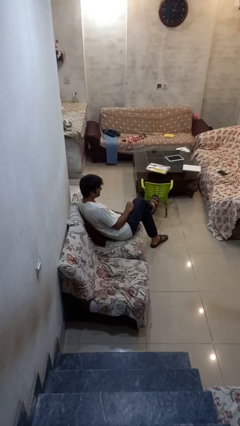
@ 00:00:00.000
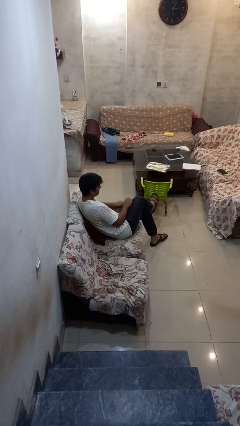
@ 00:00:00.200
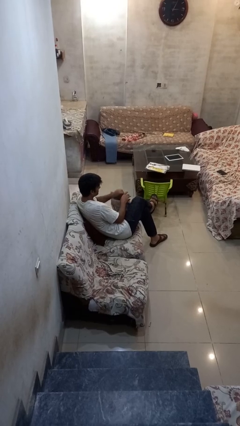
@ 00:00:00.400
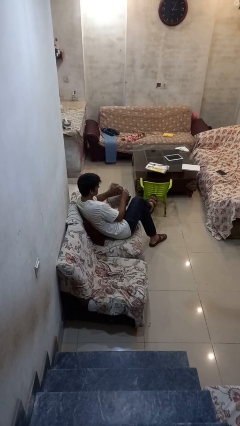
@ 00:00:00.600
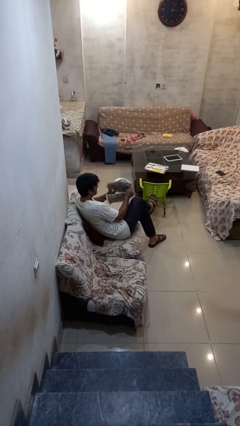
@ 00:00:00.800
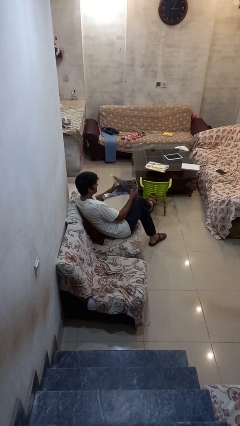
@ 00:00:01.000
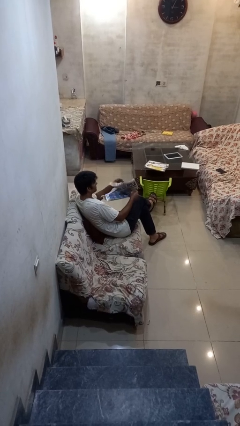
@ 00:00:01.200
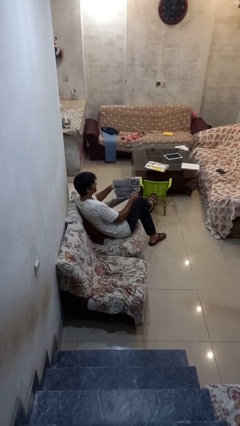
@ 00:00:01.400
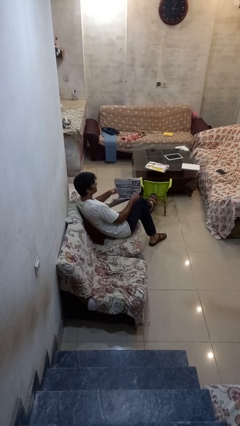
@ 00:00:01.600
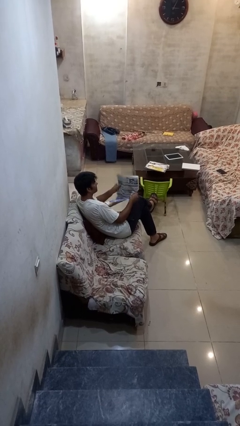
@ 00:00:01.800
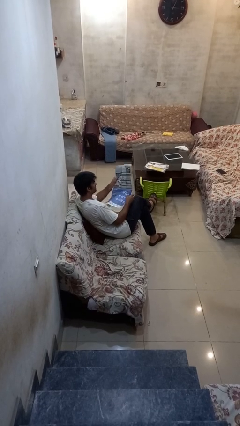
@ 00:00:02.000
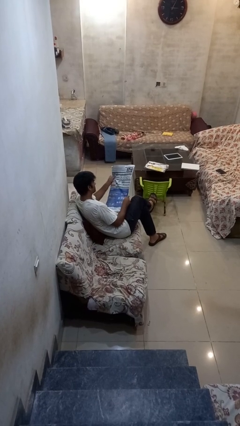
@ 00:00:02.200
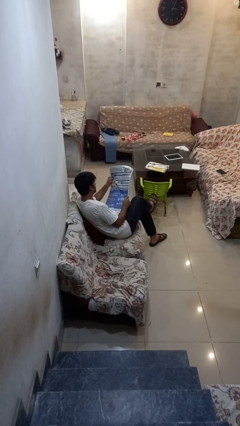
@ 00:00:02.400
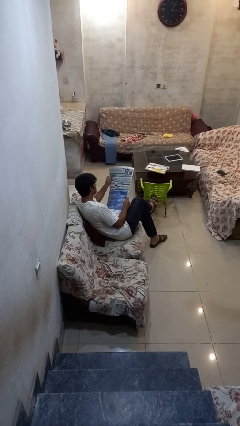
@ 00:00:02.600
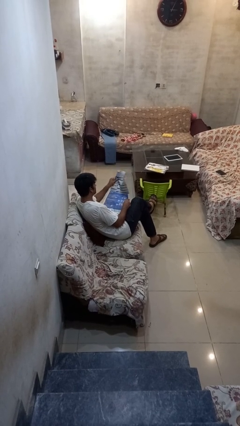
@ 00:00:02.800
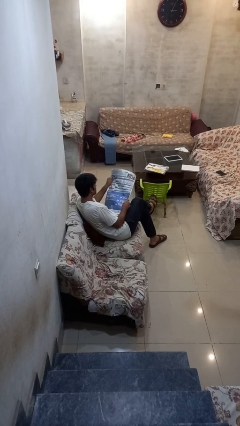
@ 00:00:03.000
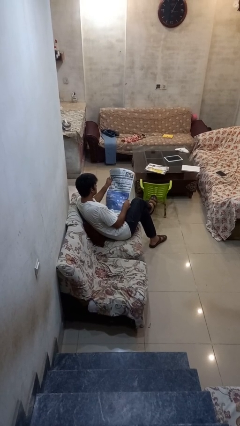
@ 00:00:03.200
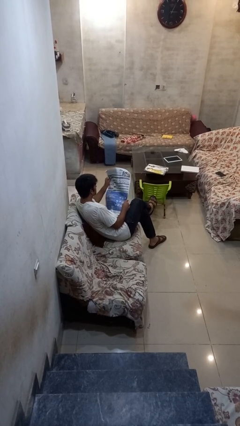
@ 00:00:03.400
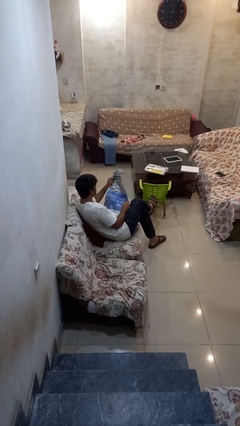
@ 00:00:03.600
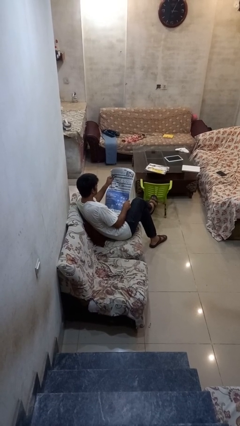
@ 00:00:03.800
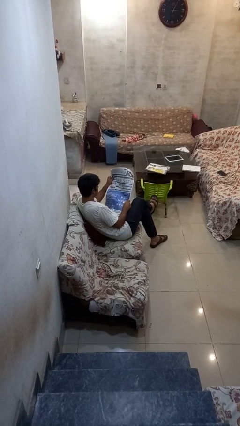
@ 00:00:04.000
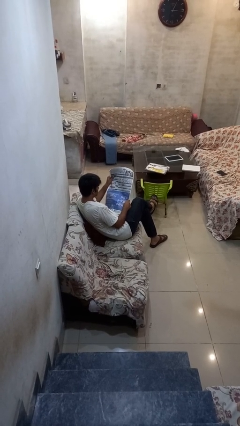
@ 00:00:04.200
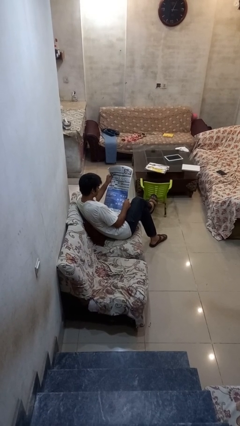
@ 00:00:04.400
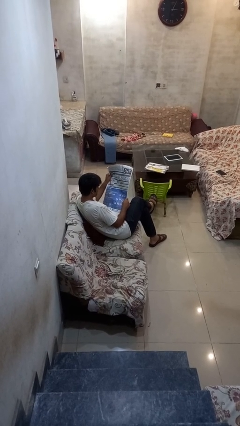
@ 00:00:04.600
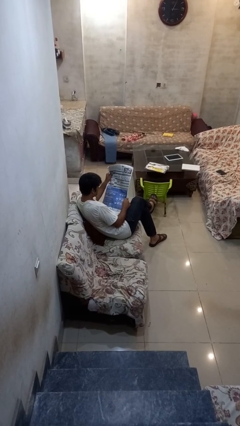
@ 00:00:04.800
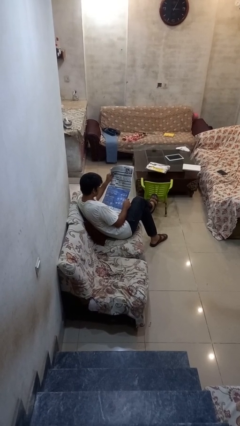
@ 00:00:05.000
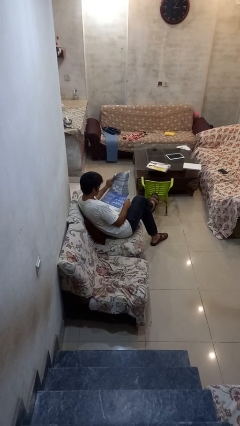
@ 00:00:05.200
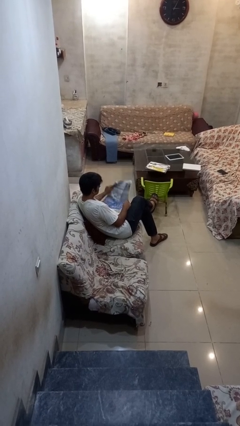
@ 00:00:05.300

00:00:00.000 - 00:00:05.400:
person reads newspaper

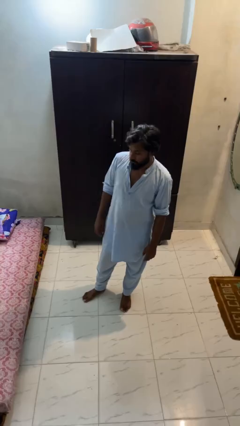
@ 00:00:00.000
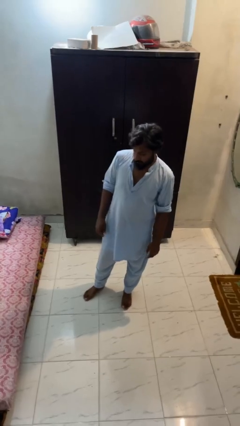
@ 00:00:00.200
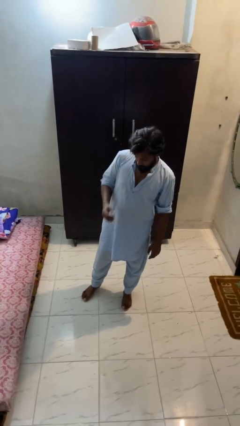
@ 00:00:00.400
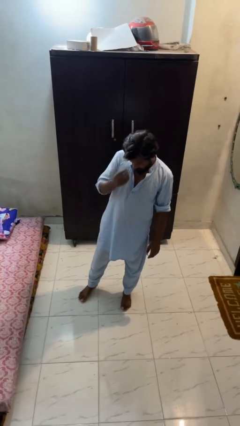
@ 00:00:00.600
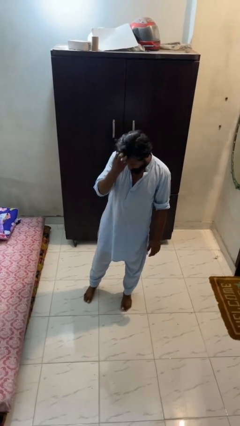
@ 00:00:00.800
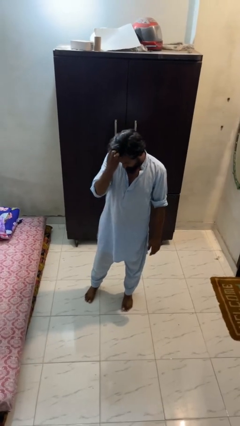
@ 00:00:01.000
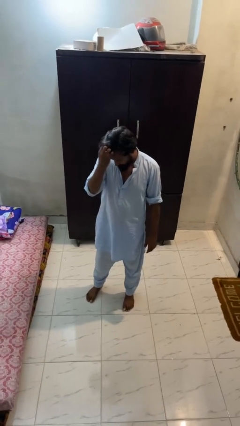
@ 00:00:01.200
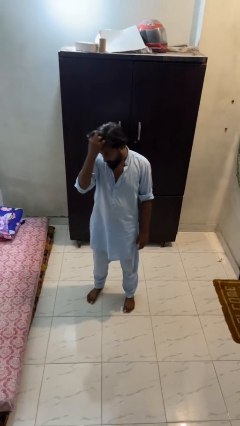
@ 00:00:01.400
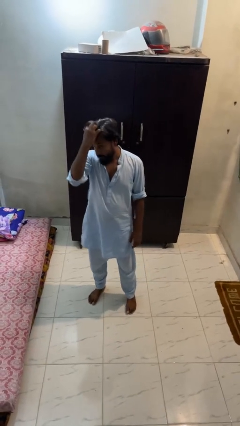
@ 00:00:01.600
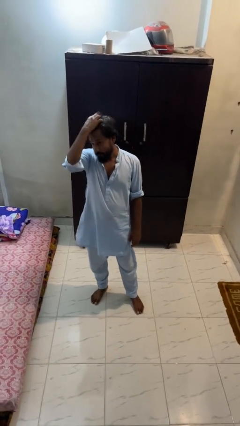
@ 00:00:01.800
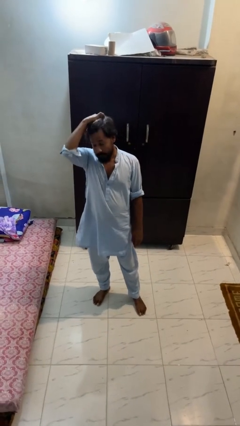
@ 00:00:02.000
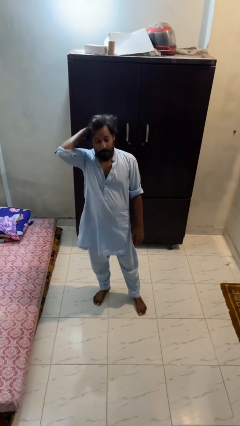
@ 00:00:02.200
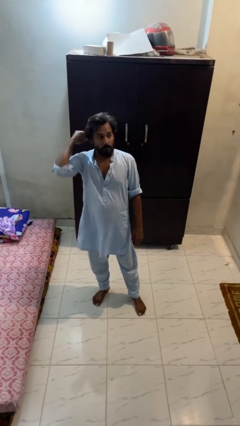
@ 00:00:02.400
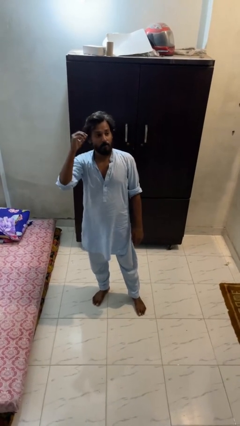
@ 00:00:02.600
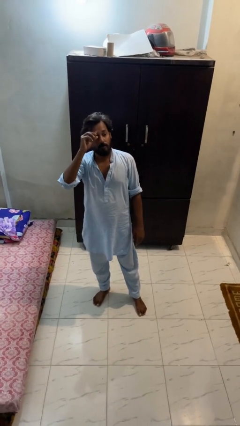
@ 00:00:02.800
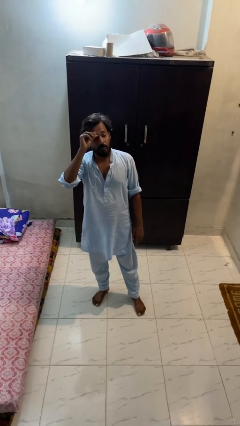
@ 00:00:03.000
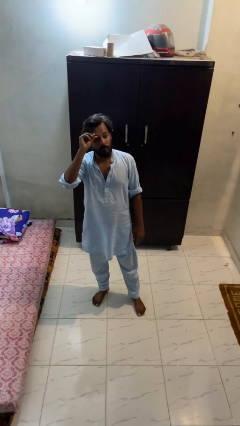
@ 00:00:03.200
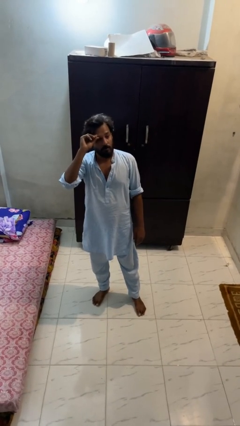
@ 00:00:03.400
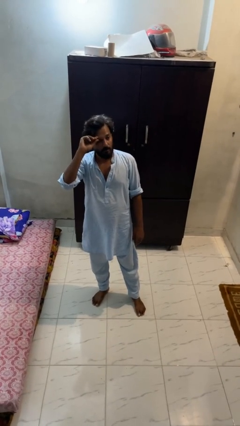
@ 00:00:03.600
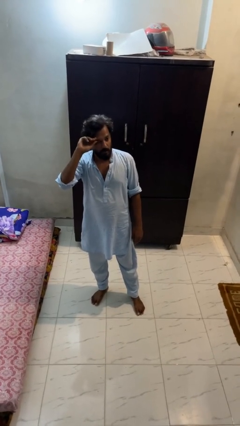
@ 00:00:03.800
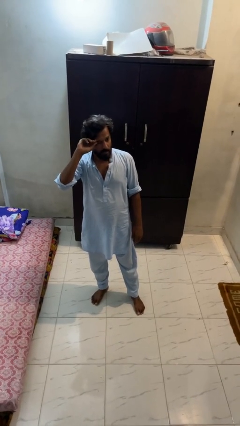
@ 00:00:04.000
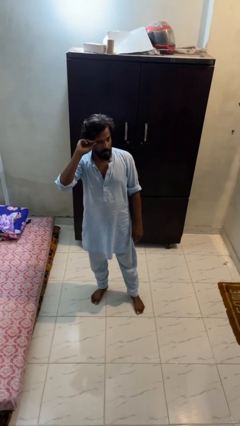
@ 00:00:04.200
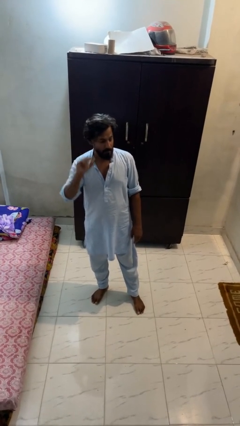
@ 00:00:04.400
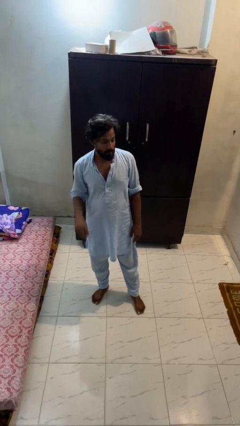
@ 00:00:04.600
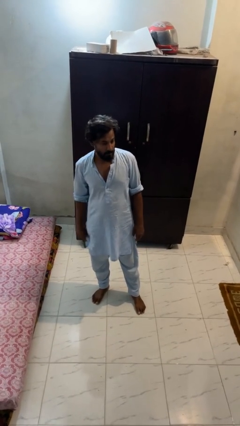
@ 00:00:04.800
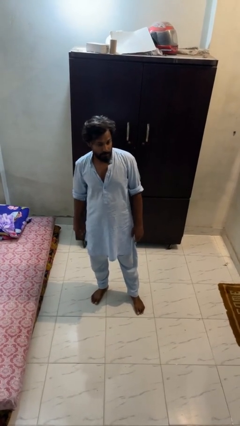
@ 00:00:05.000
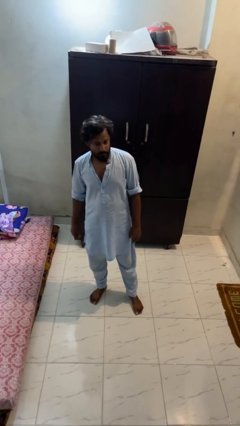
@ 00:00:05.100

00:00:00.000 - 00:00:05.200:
person scratches face

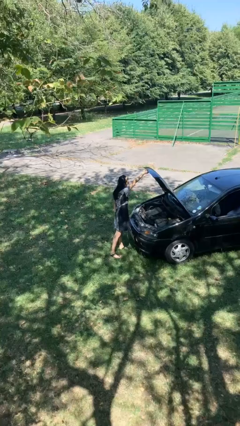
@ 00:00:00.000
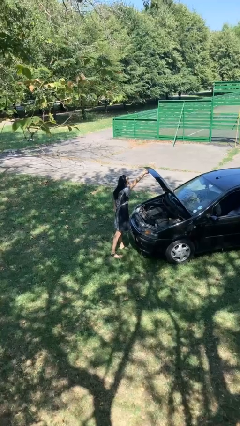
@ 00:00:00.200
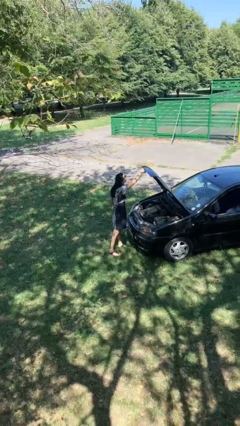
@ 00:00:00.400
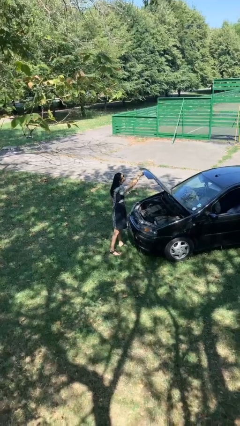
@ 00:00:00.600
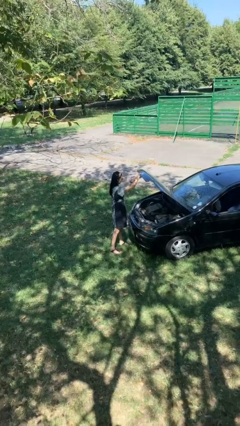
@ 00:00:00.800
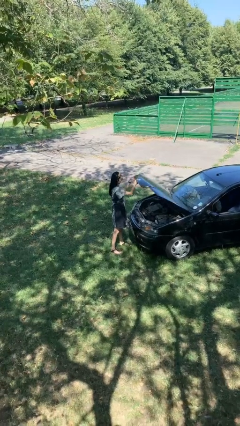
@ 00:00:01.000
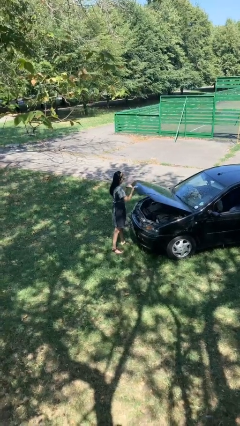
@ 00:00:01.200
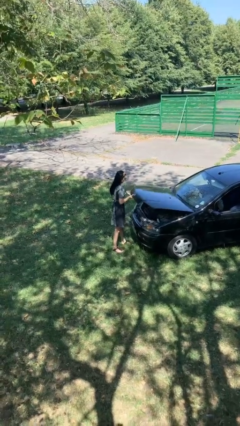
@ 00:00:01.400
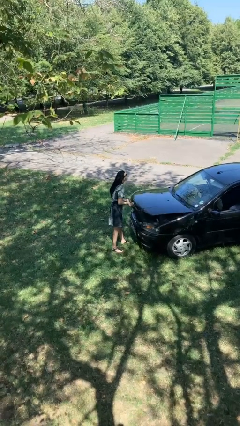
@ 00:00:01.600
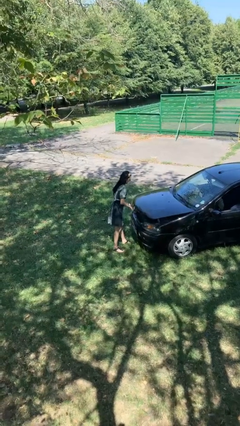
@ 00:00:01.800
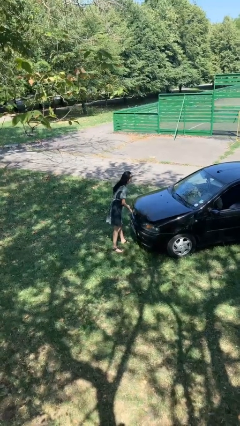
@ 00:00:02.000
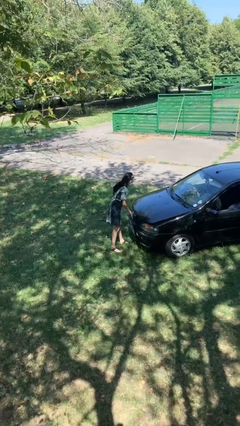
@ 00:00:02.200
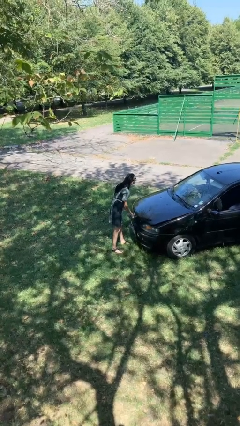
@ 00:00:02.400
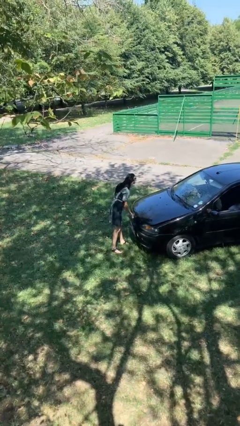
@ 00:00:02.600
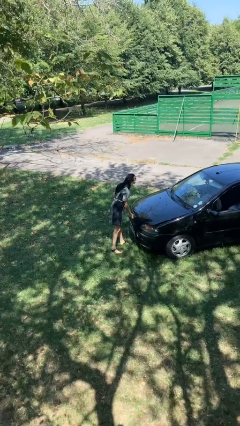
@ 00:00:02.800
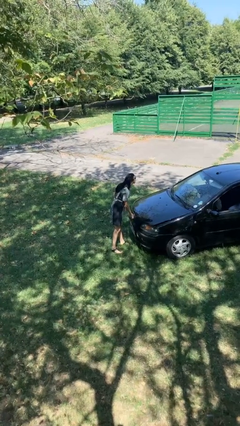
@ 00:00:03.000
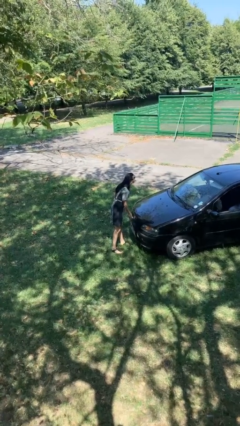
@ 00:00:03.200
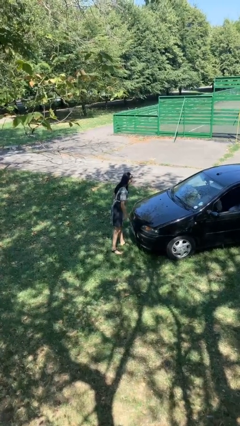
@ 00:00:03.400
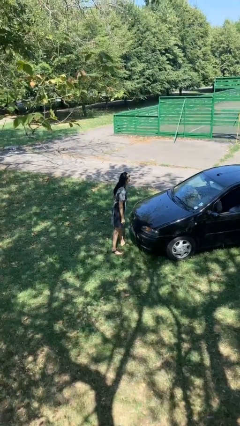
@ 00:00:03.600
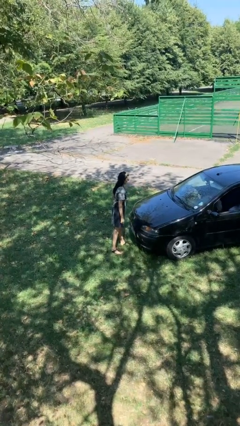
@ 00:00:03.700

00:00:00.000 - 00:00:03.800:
person closes car hood

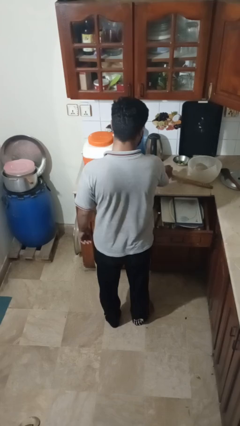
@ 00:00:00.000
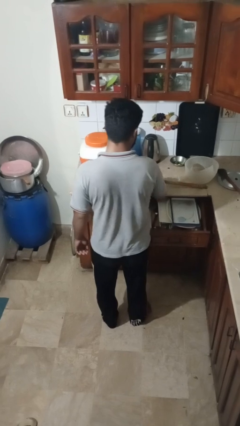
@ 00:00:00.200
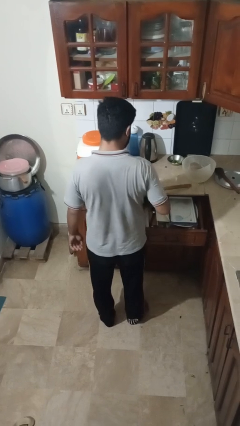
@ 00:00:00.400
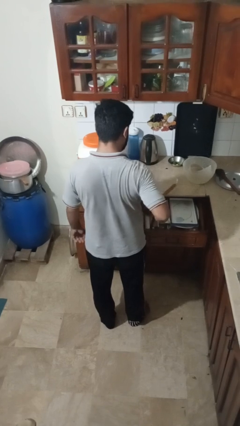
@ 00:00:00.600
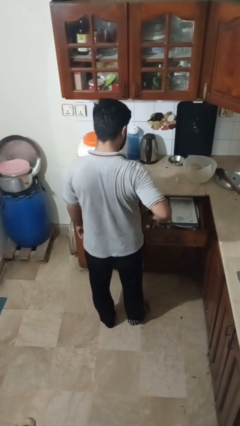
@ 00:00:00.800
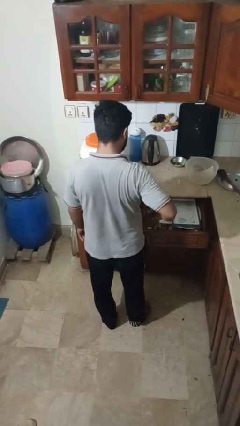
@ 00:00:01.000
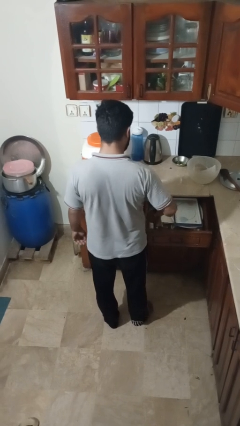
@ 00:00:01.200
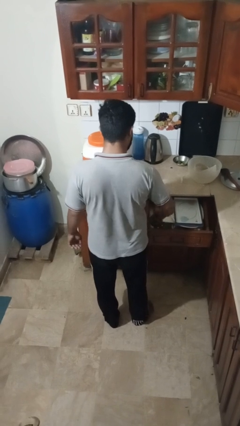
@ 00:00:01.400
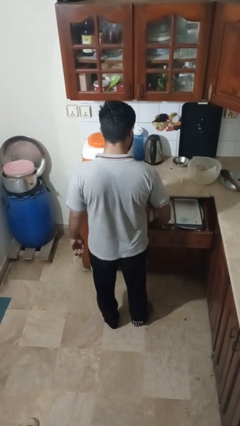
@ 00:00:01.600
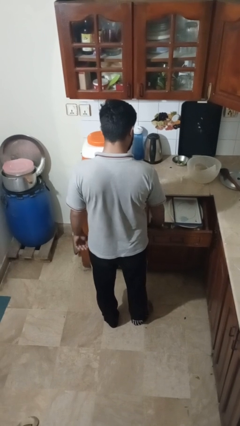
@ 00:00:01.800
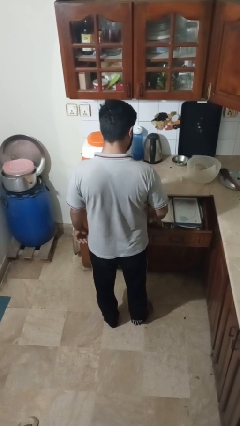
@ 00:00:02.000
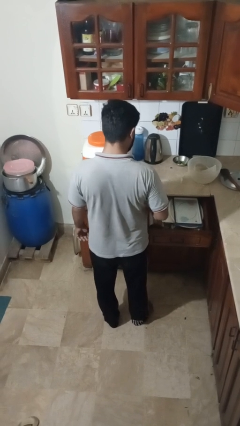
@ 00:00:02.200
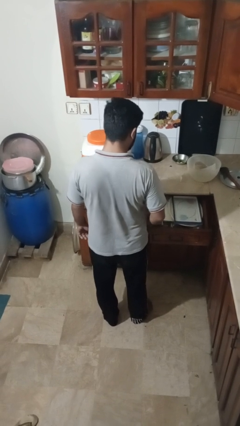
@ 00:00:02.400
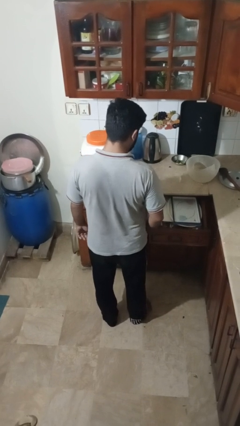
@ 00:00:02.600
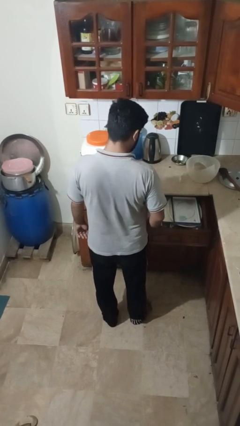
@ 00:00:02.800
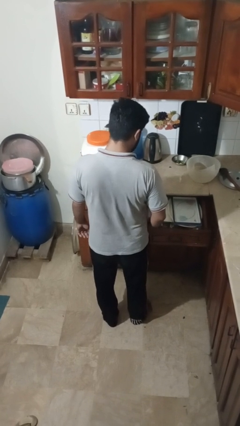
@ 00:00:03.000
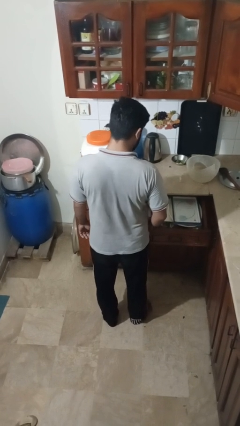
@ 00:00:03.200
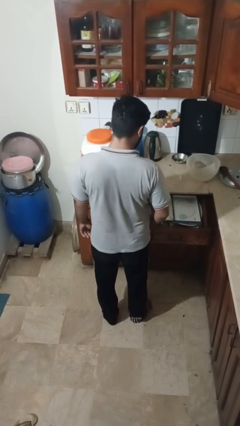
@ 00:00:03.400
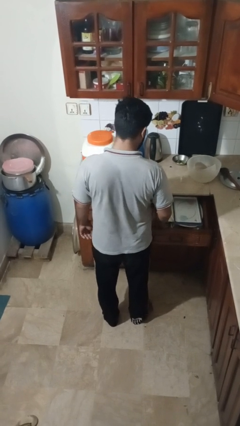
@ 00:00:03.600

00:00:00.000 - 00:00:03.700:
person puts object into kitchen drawer
